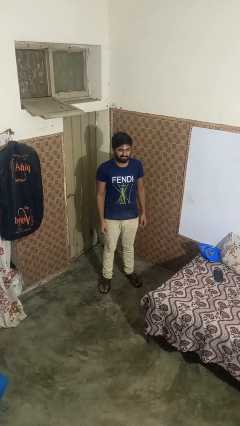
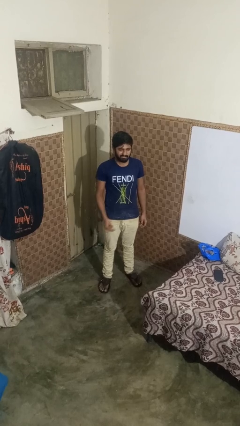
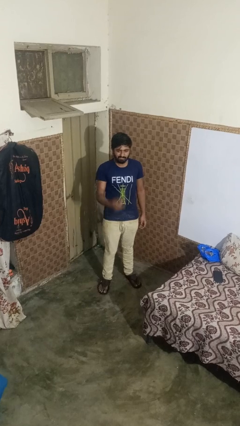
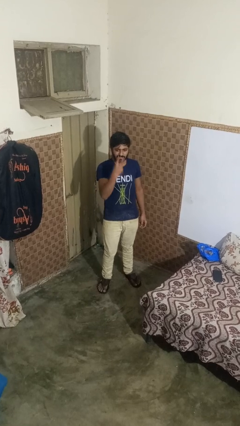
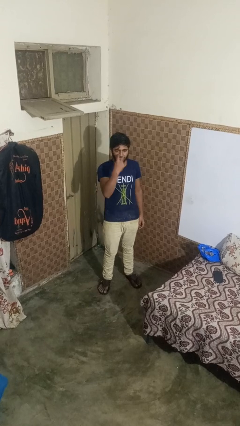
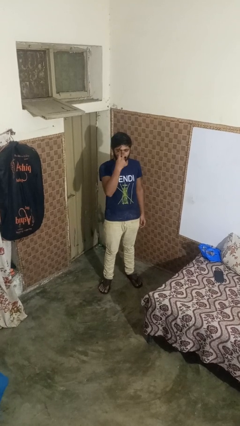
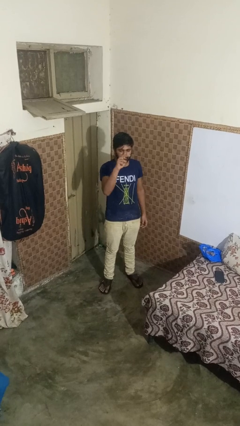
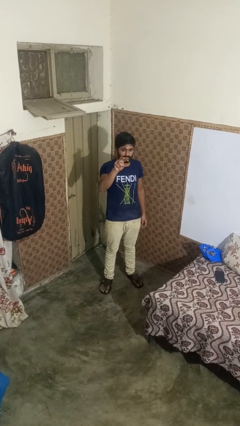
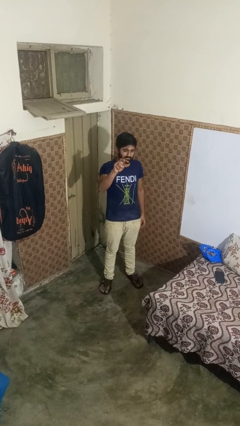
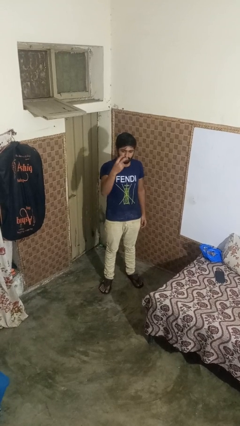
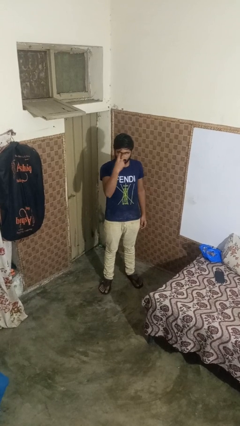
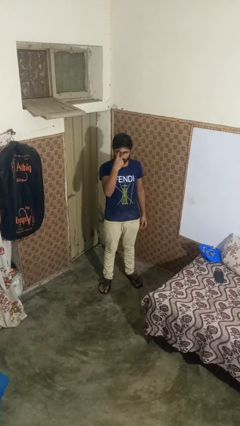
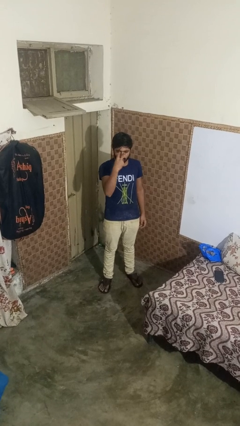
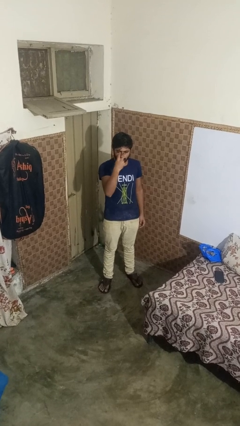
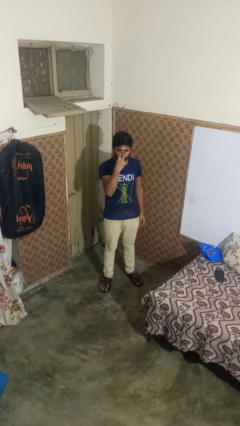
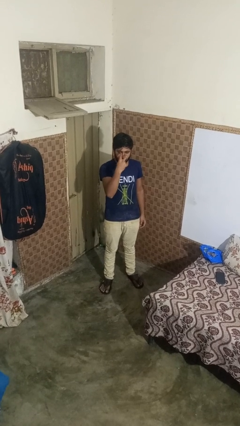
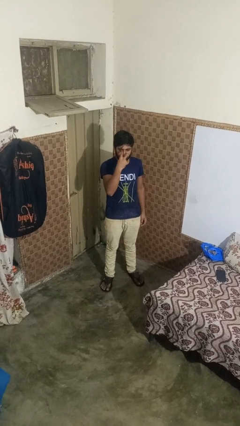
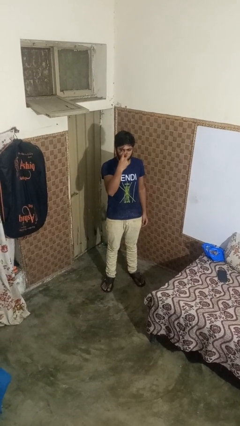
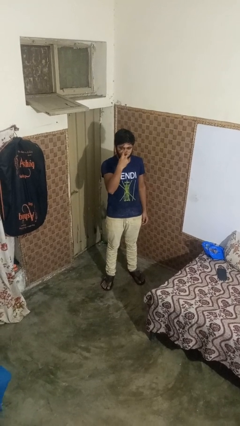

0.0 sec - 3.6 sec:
person gestures watch closely

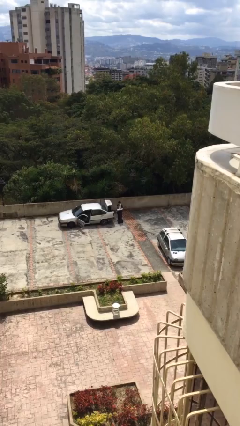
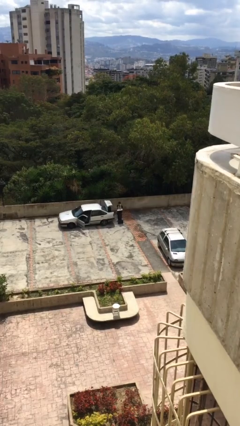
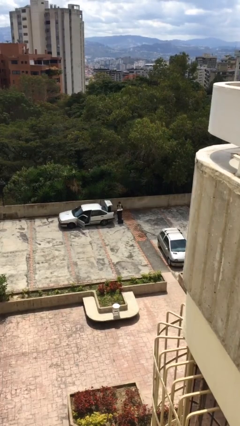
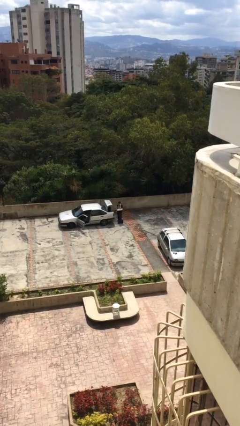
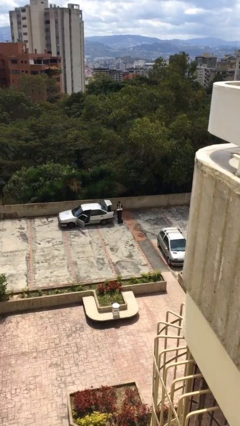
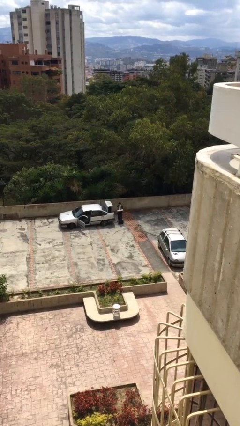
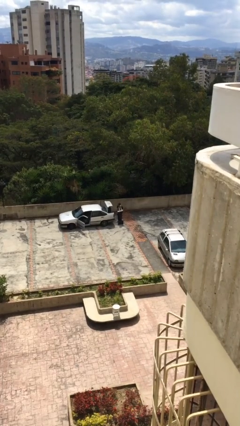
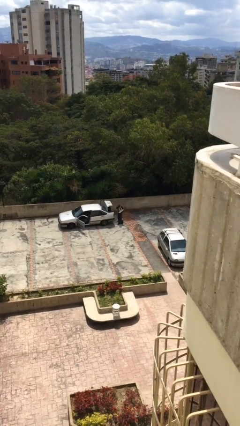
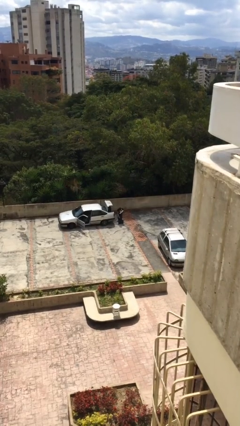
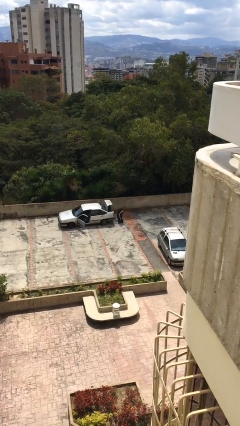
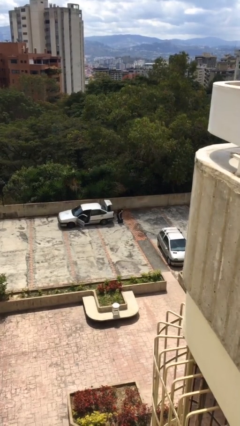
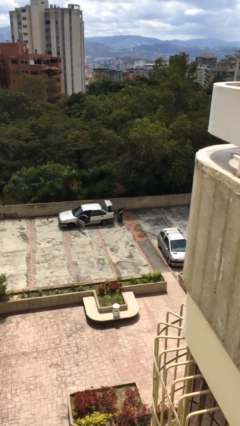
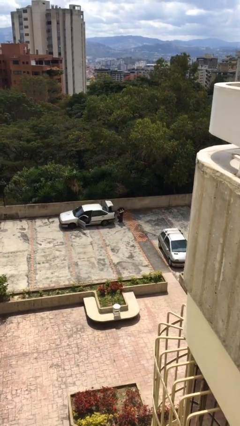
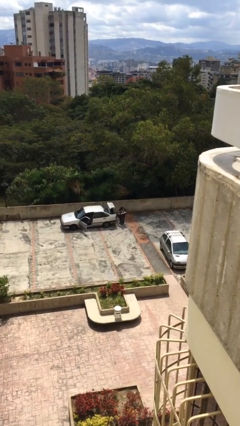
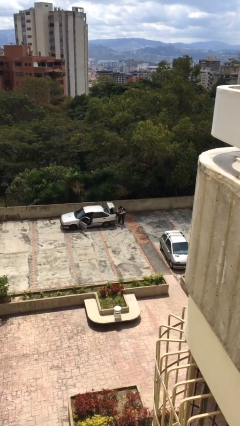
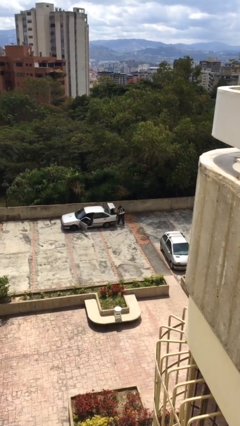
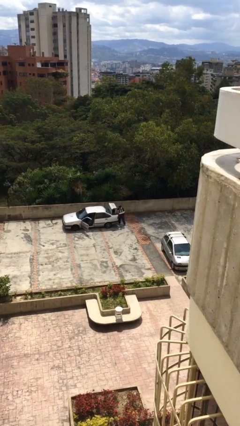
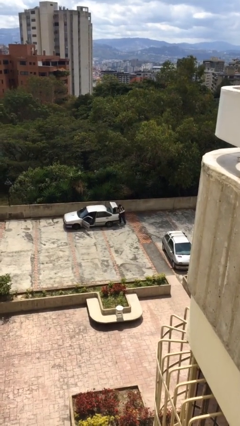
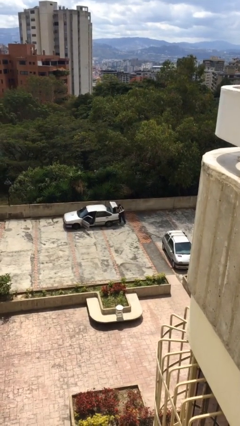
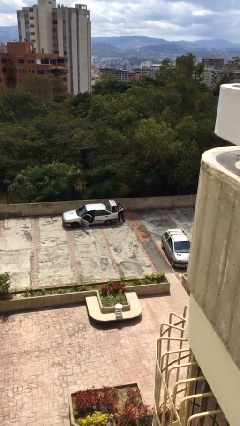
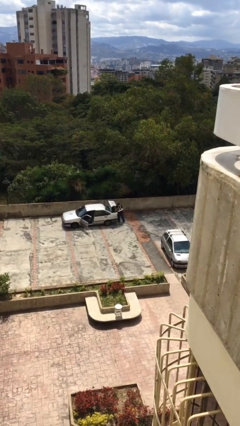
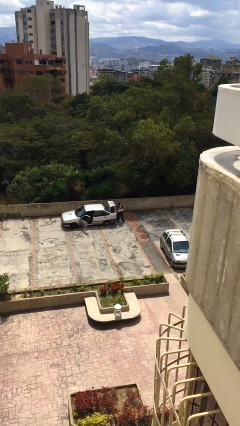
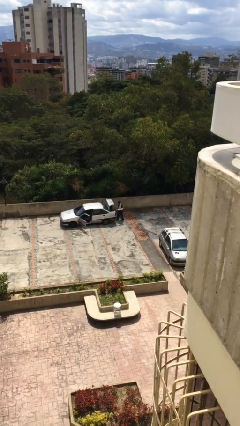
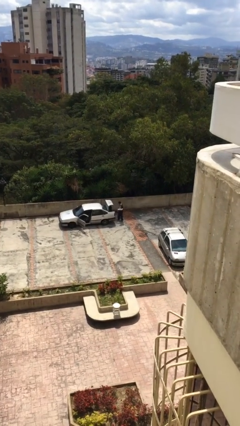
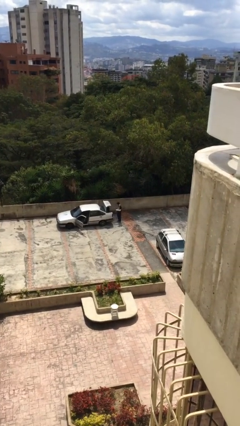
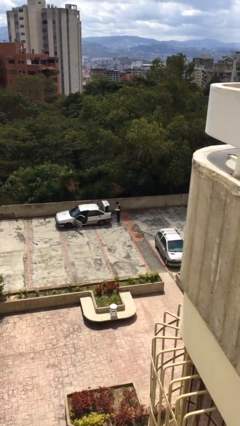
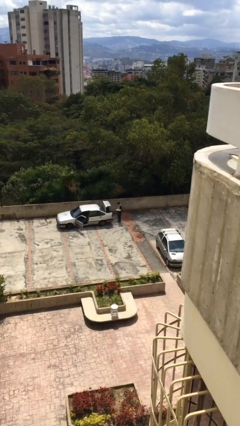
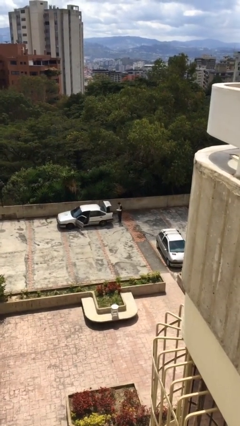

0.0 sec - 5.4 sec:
person loads car

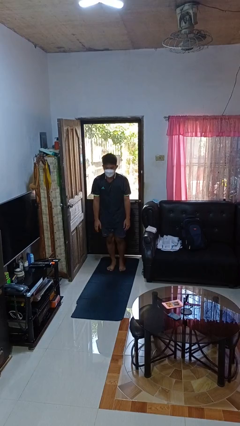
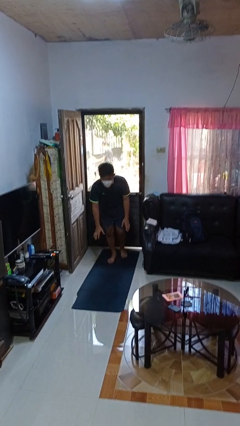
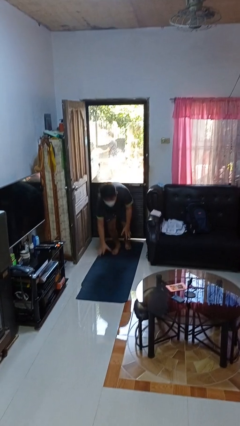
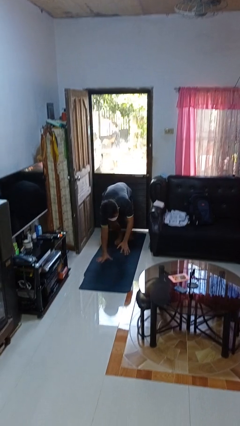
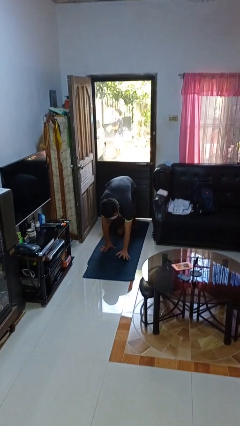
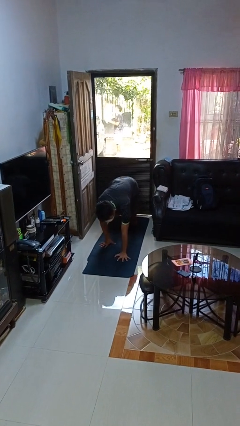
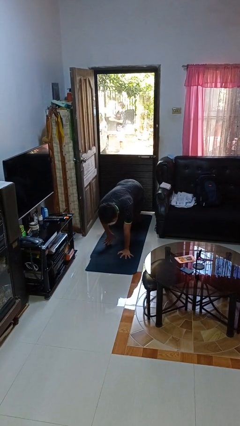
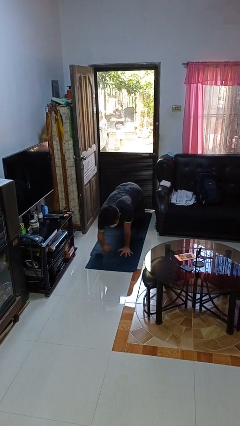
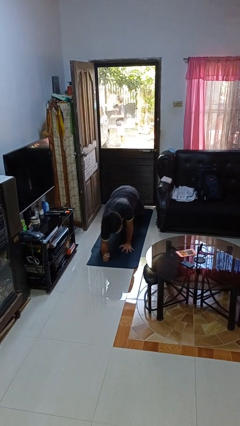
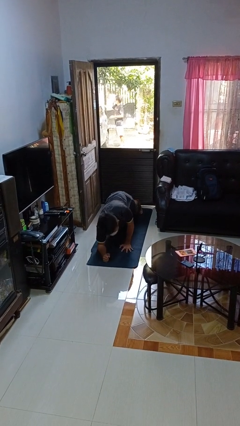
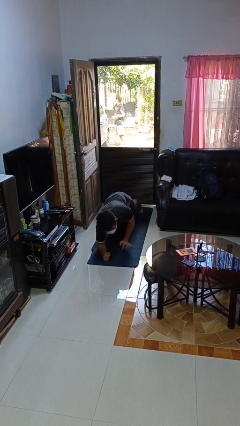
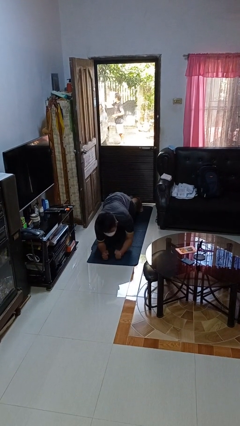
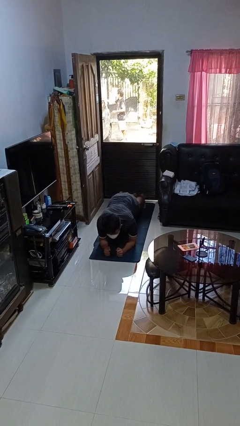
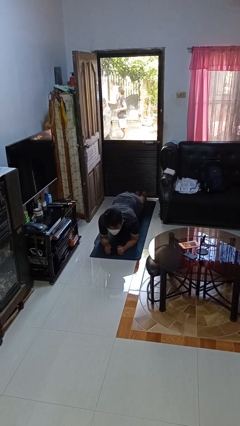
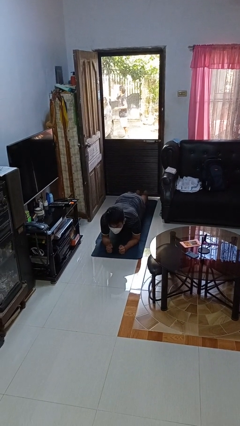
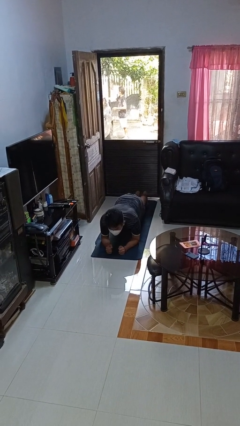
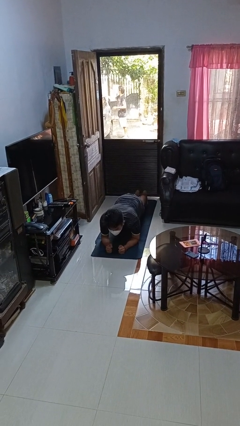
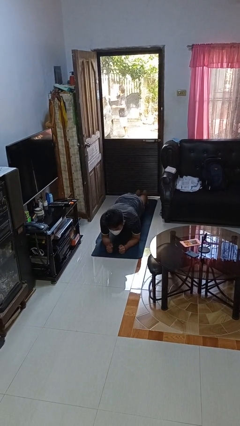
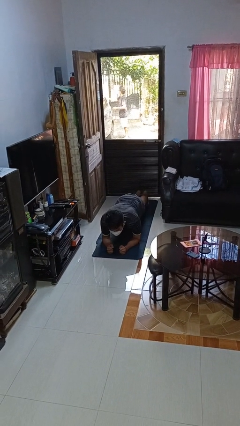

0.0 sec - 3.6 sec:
person exercises with plank

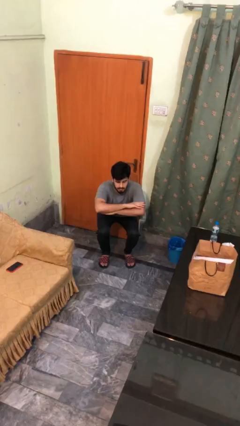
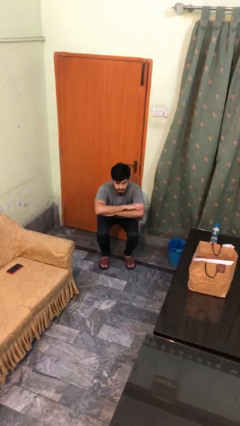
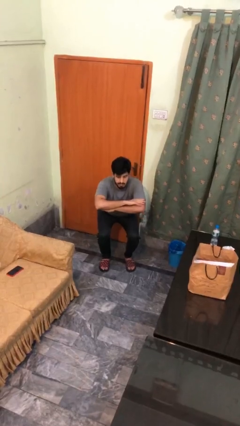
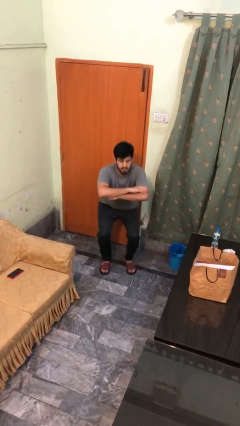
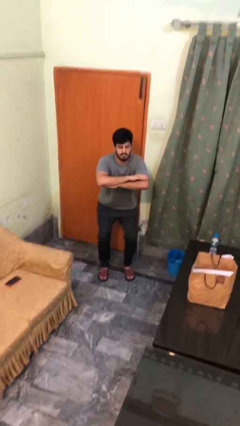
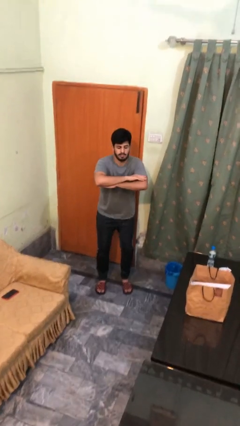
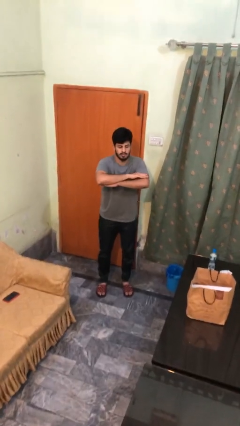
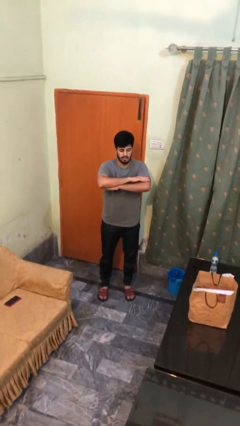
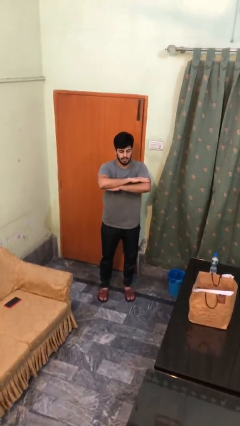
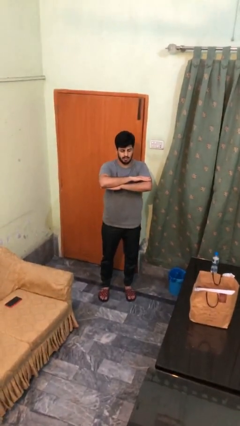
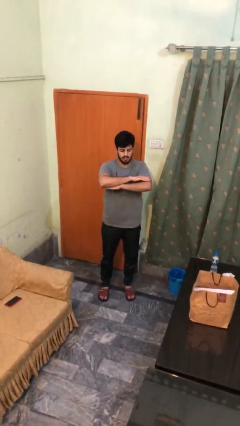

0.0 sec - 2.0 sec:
person stands up

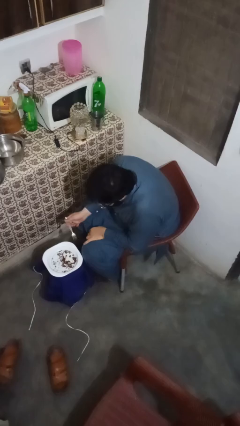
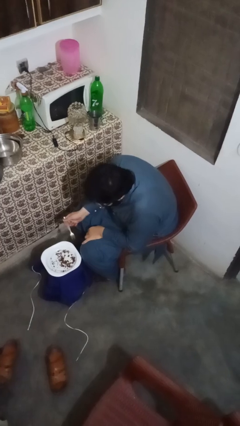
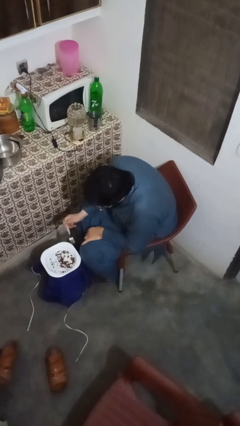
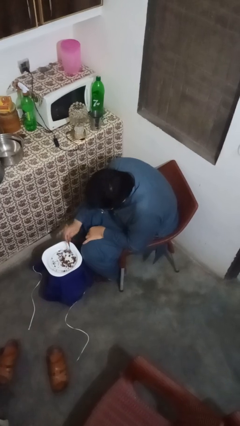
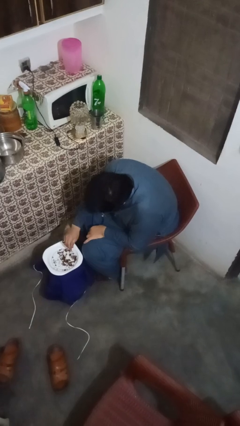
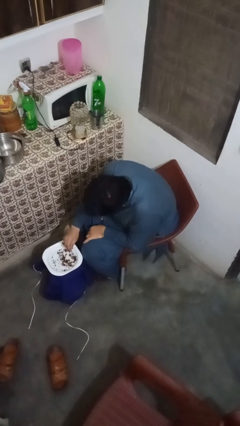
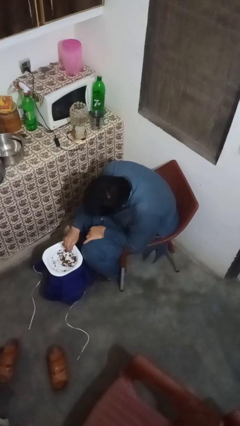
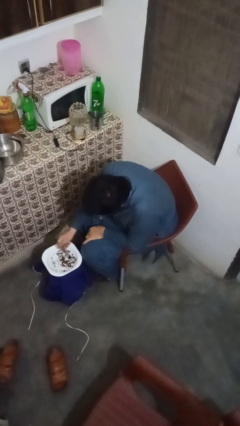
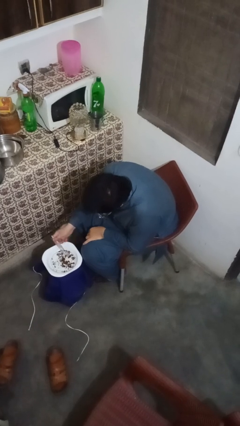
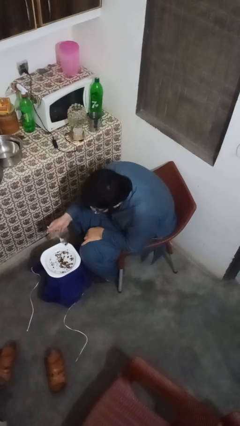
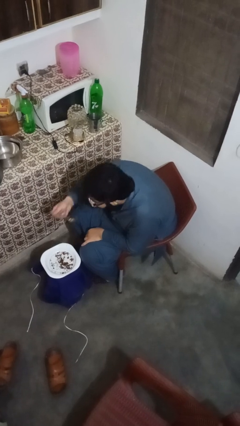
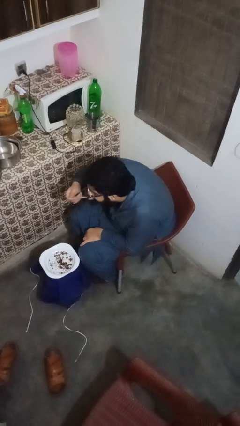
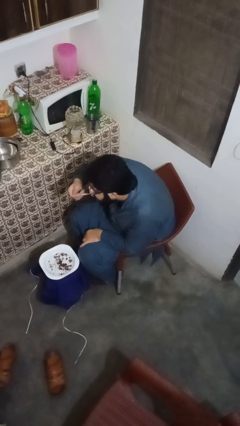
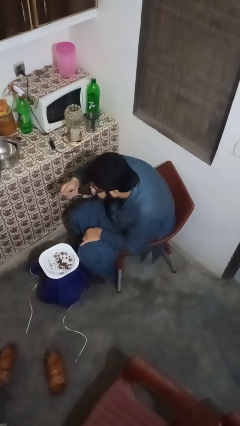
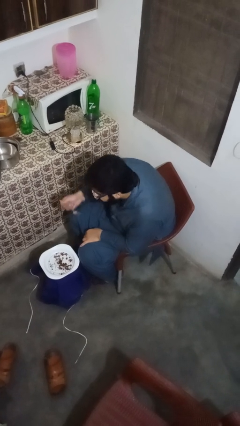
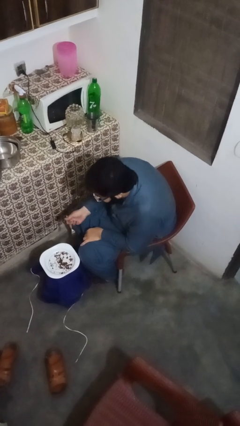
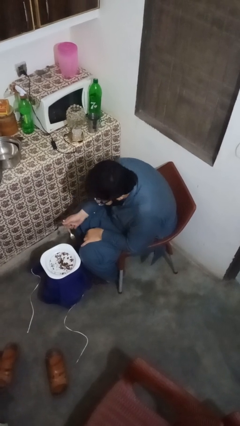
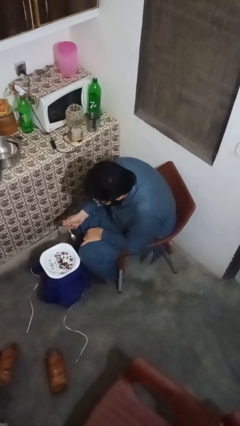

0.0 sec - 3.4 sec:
person eats with utensil
